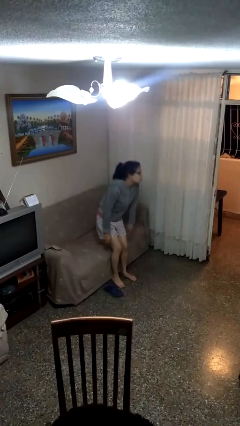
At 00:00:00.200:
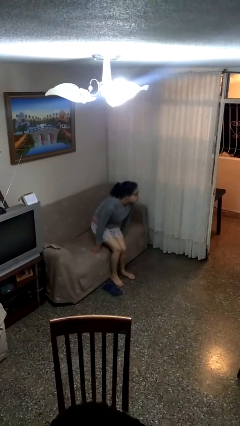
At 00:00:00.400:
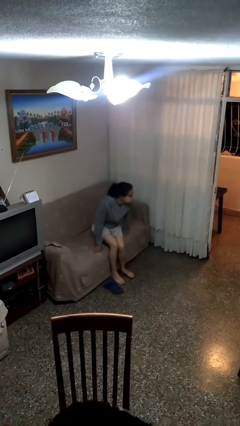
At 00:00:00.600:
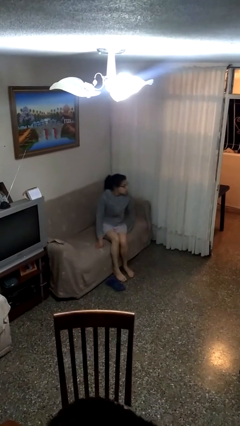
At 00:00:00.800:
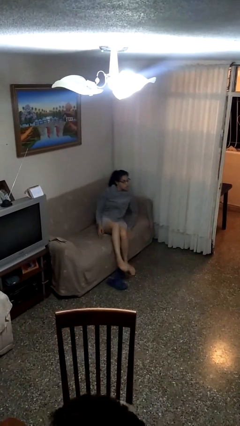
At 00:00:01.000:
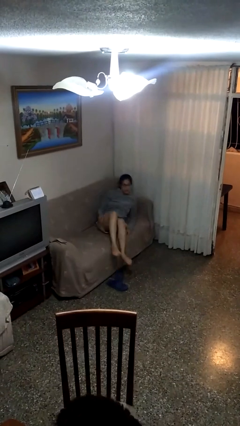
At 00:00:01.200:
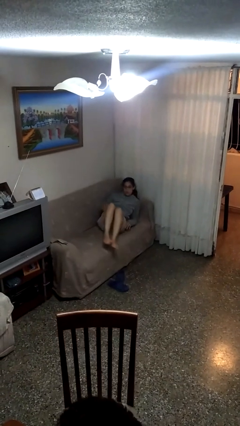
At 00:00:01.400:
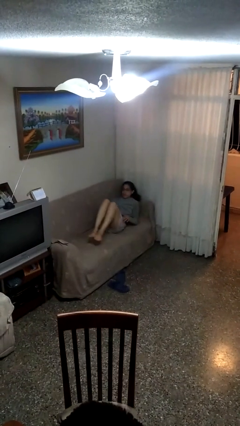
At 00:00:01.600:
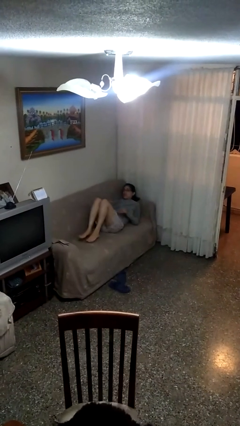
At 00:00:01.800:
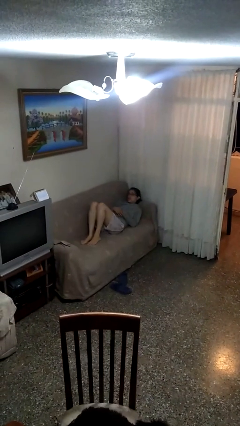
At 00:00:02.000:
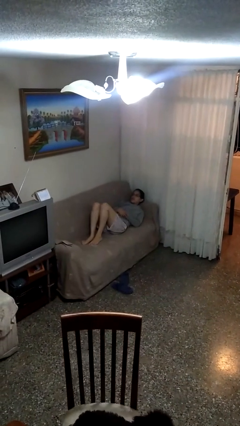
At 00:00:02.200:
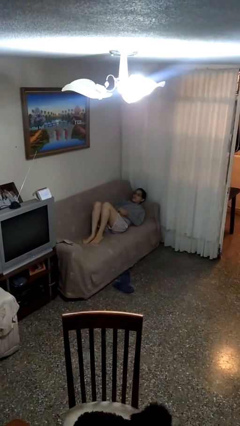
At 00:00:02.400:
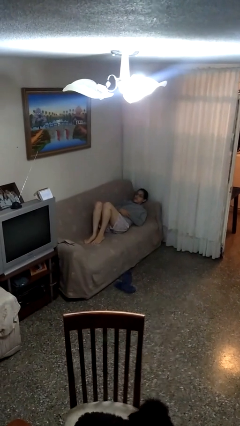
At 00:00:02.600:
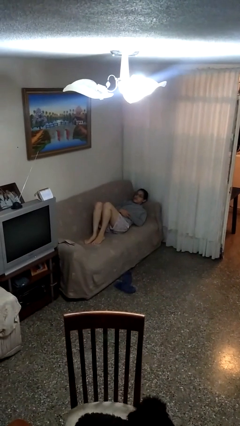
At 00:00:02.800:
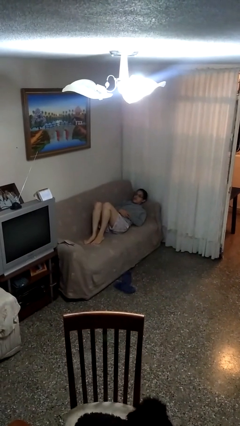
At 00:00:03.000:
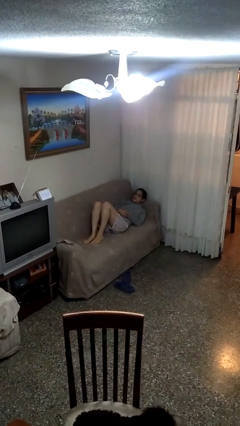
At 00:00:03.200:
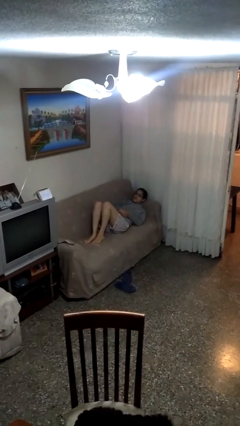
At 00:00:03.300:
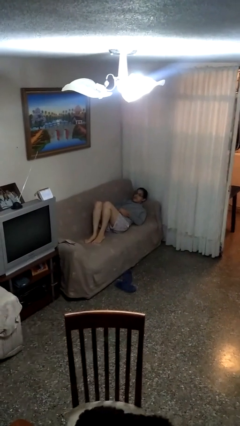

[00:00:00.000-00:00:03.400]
person lies down on couch

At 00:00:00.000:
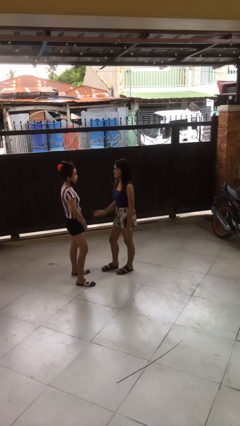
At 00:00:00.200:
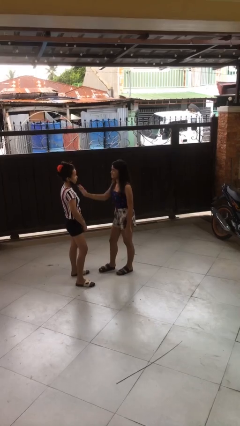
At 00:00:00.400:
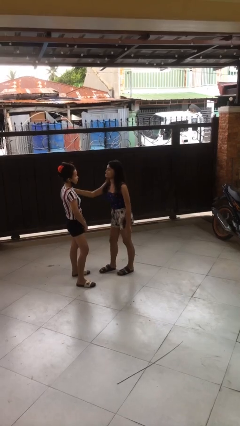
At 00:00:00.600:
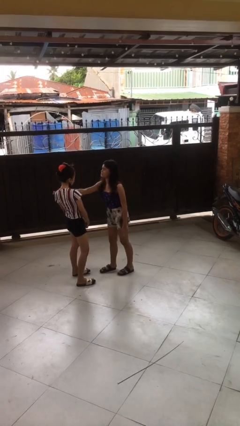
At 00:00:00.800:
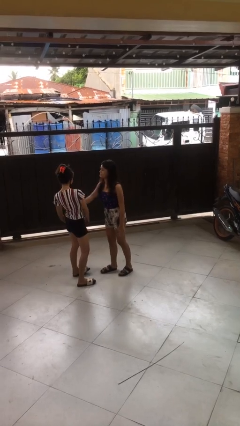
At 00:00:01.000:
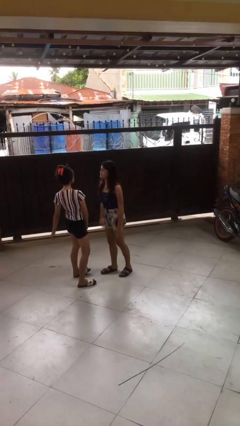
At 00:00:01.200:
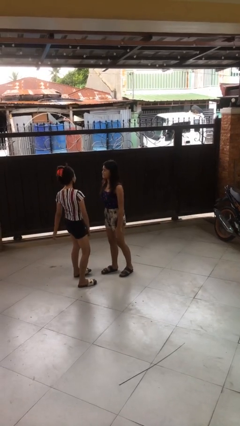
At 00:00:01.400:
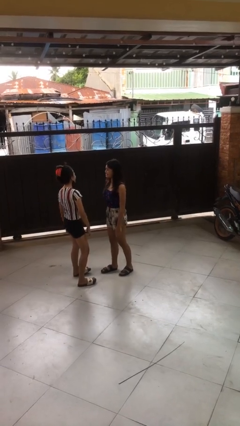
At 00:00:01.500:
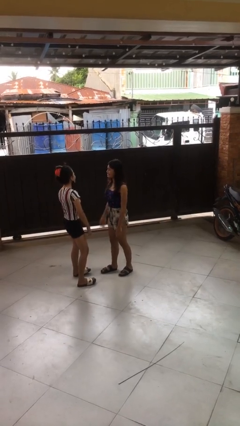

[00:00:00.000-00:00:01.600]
person shoves person

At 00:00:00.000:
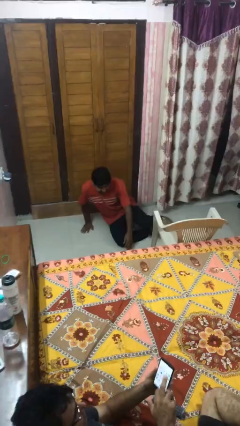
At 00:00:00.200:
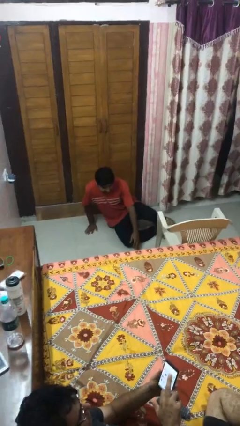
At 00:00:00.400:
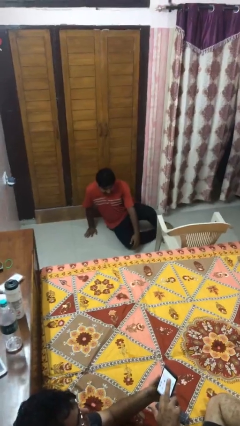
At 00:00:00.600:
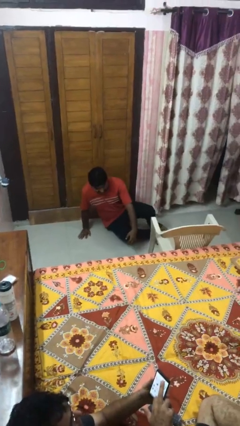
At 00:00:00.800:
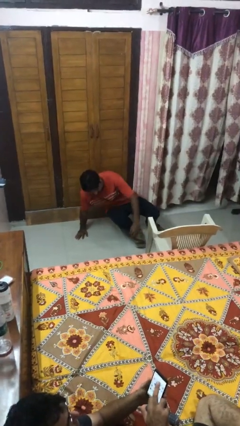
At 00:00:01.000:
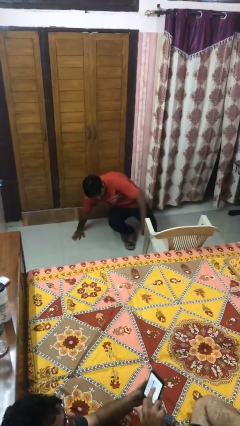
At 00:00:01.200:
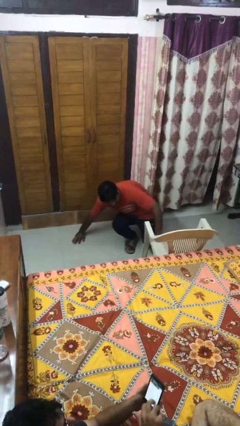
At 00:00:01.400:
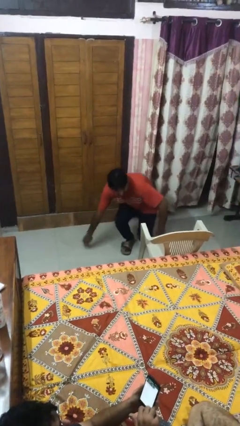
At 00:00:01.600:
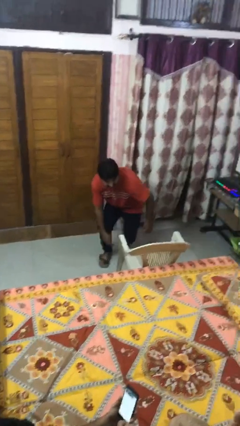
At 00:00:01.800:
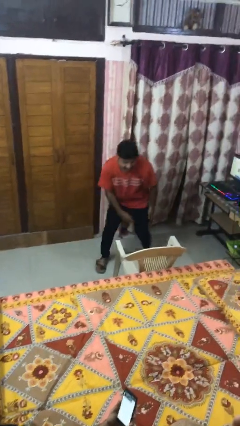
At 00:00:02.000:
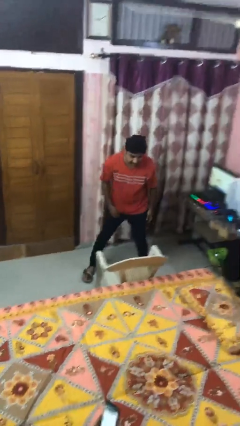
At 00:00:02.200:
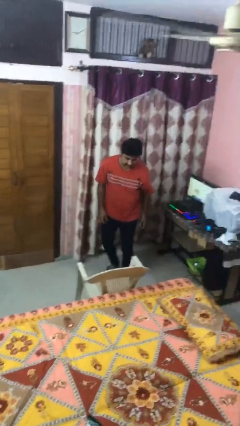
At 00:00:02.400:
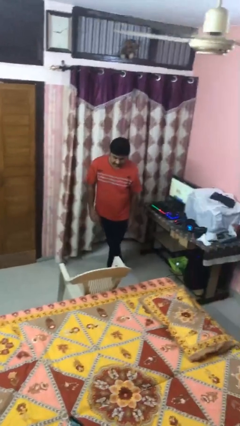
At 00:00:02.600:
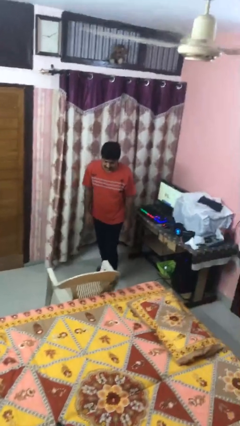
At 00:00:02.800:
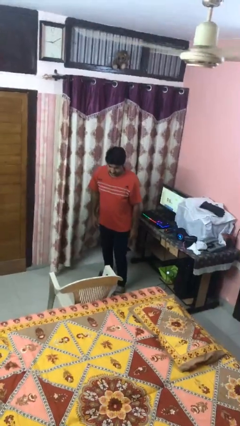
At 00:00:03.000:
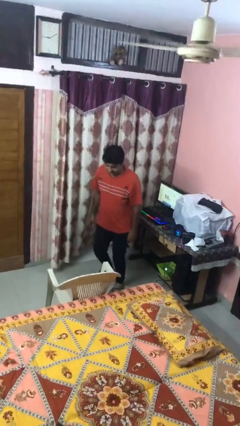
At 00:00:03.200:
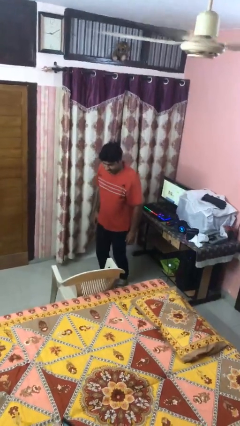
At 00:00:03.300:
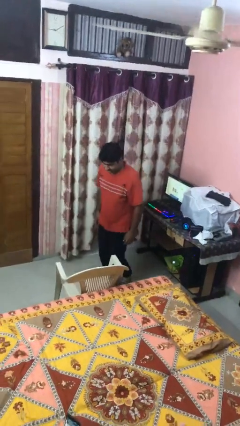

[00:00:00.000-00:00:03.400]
person stands up from floor

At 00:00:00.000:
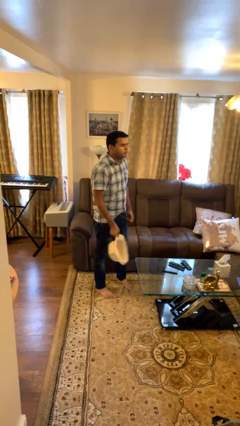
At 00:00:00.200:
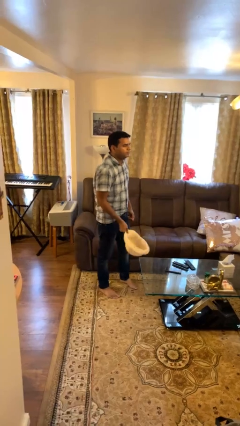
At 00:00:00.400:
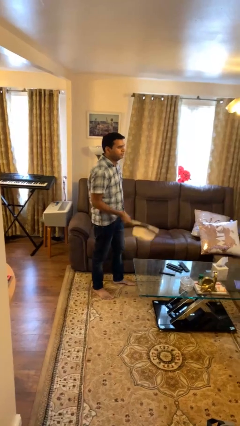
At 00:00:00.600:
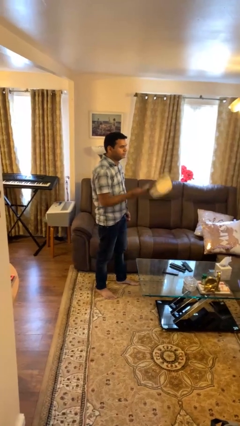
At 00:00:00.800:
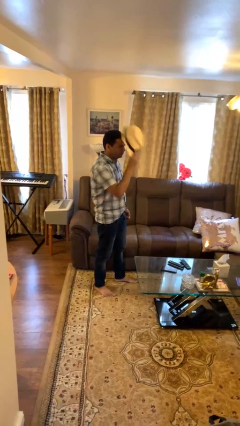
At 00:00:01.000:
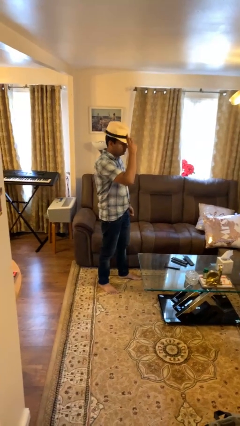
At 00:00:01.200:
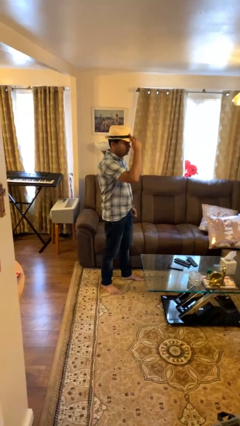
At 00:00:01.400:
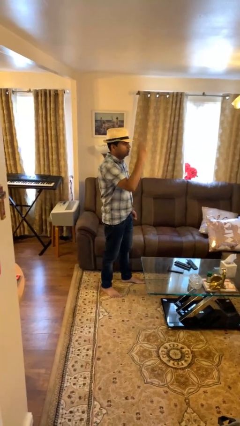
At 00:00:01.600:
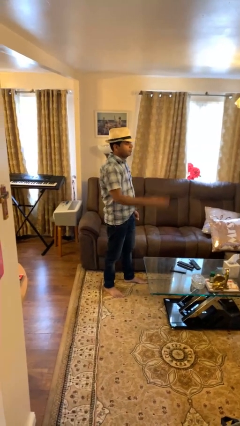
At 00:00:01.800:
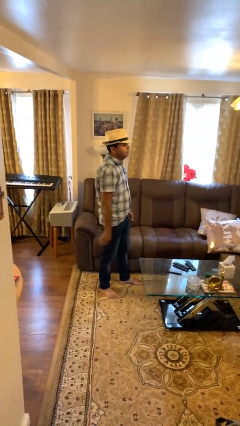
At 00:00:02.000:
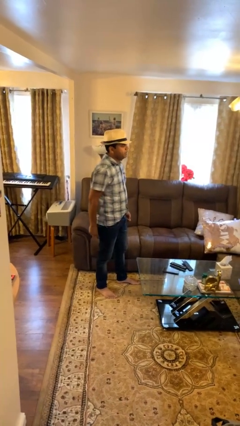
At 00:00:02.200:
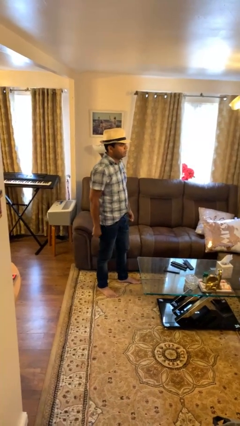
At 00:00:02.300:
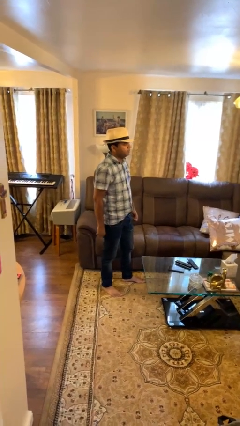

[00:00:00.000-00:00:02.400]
person puts on hat

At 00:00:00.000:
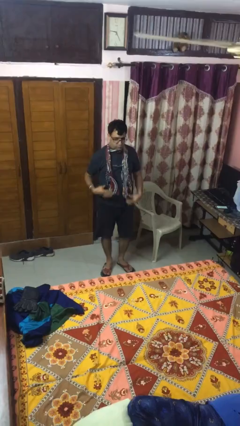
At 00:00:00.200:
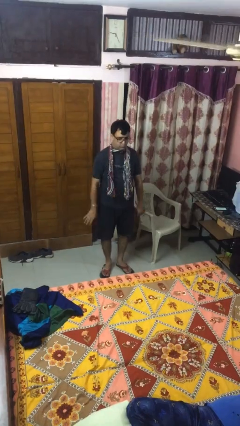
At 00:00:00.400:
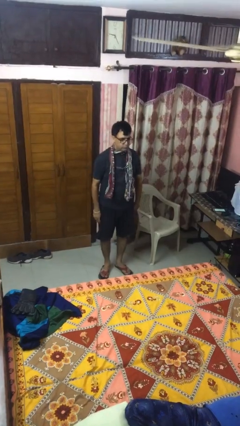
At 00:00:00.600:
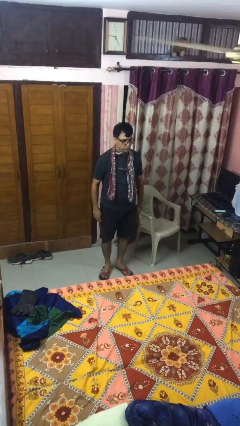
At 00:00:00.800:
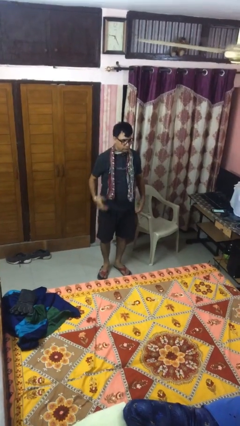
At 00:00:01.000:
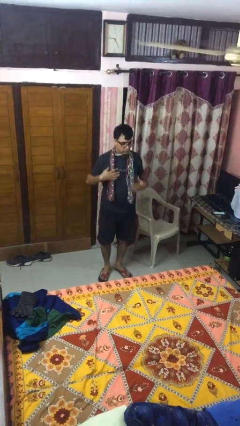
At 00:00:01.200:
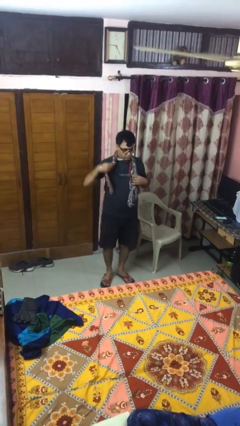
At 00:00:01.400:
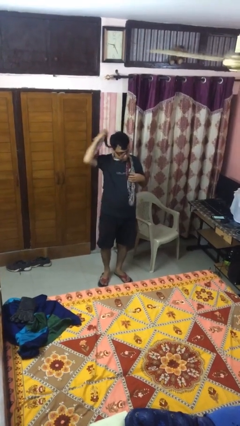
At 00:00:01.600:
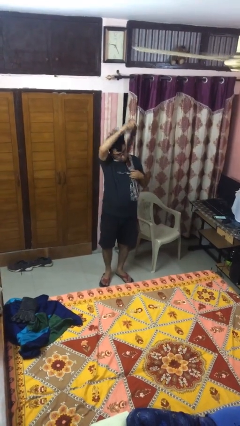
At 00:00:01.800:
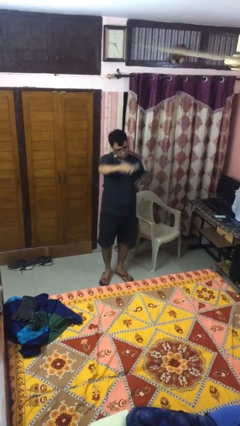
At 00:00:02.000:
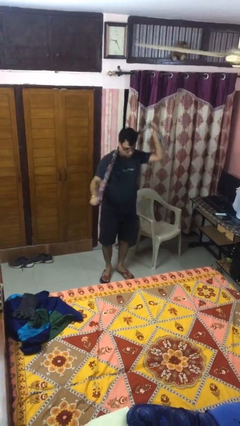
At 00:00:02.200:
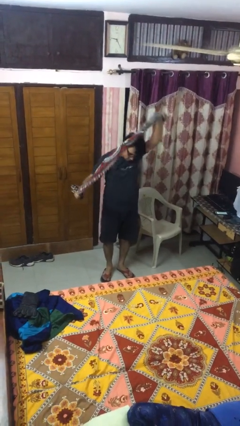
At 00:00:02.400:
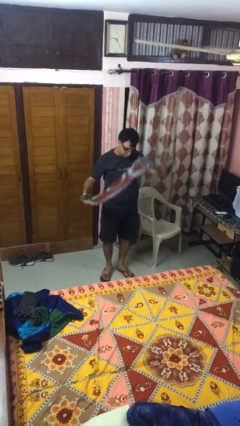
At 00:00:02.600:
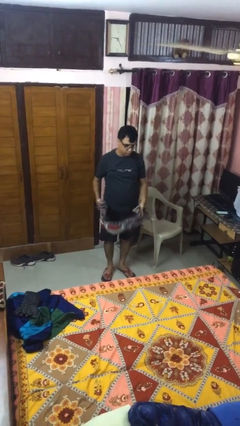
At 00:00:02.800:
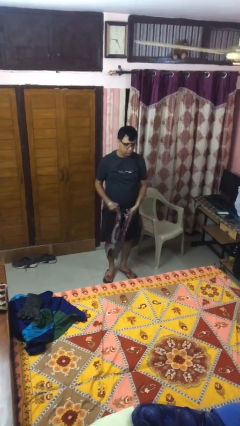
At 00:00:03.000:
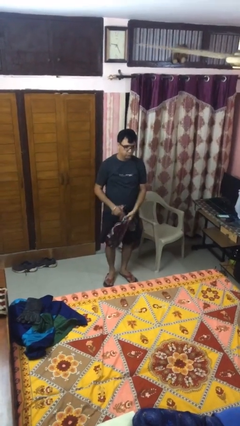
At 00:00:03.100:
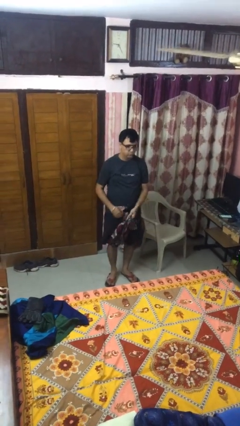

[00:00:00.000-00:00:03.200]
person takes off scarf

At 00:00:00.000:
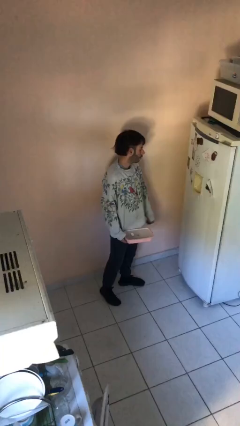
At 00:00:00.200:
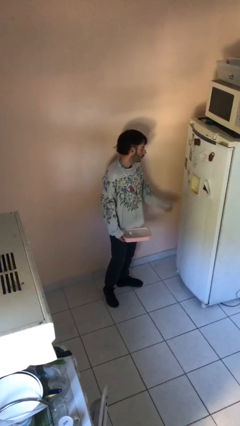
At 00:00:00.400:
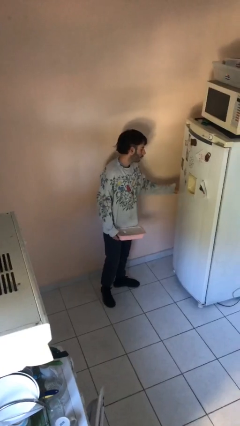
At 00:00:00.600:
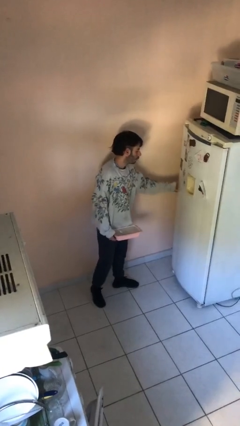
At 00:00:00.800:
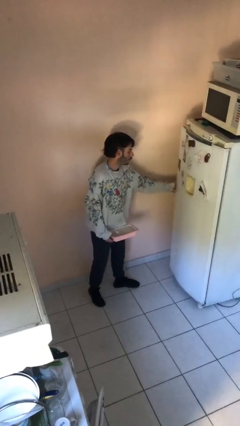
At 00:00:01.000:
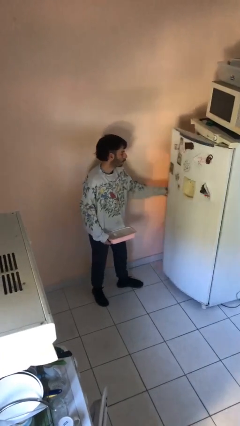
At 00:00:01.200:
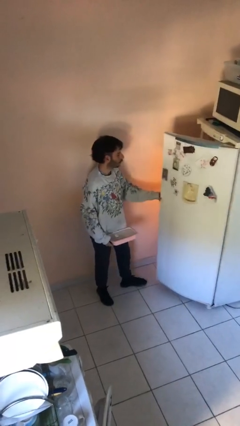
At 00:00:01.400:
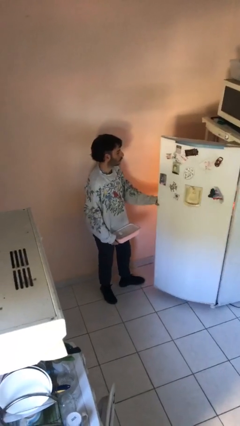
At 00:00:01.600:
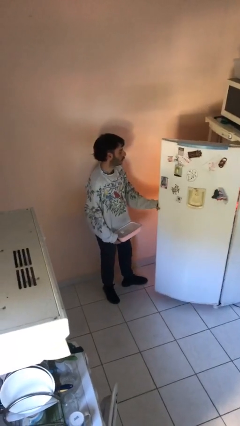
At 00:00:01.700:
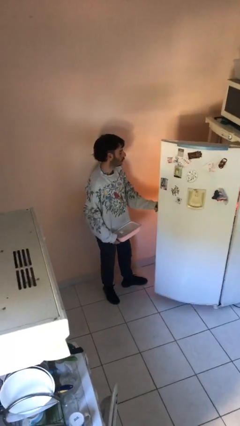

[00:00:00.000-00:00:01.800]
person opens refrigerator

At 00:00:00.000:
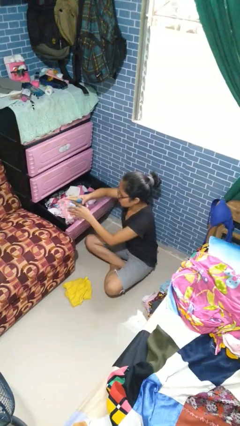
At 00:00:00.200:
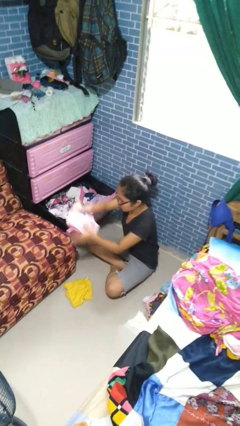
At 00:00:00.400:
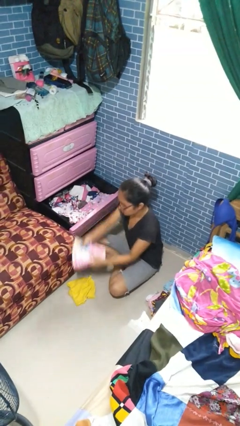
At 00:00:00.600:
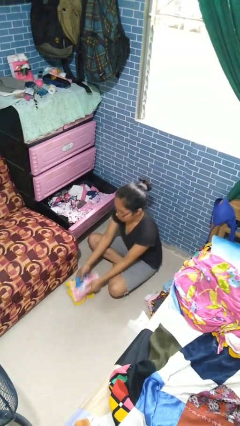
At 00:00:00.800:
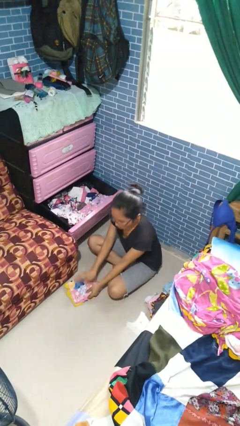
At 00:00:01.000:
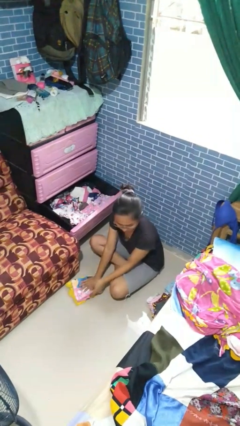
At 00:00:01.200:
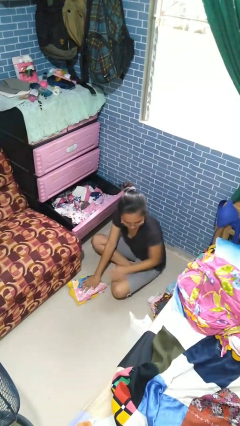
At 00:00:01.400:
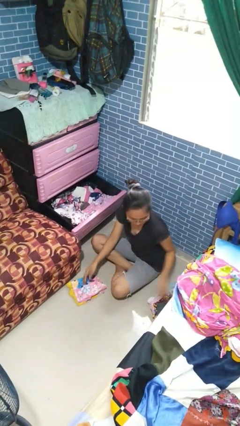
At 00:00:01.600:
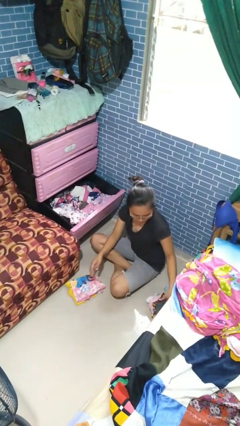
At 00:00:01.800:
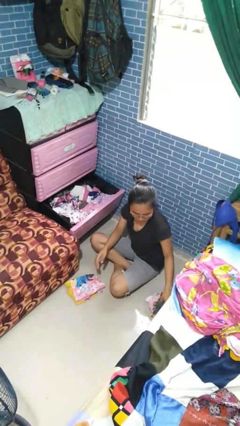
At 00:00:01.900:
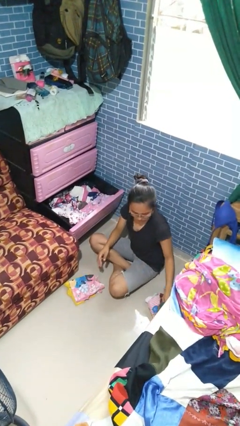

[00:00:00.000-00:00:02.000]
person takes clothes from dresser
